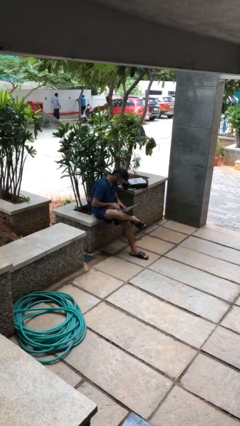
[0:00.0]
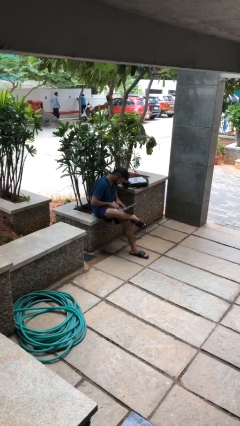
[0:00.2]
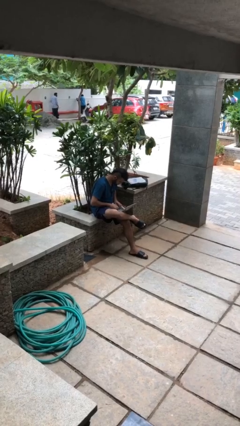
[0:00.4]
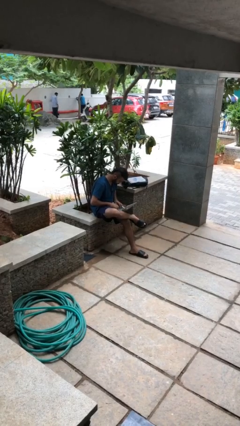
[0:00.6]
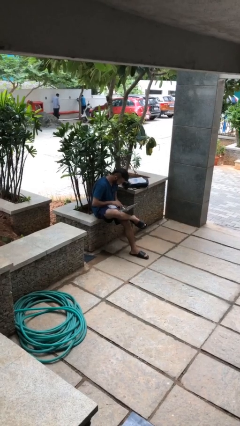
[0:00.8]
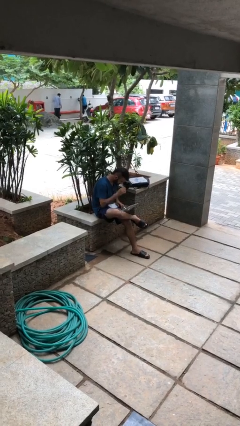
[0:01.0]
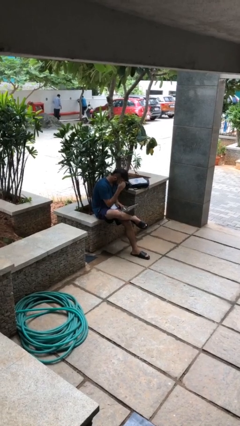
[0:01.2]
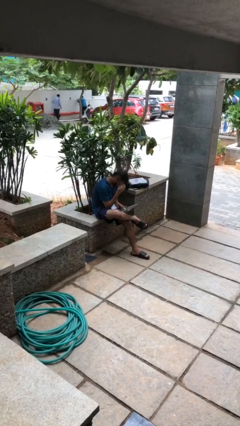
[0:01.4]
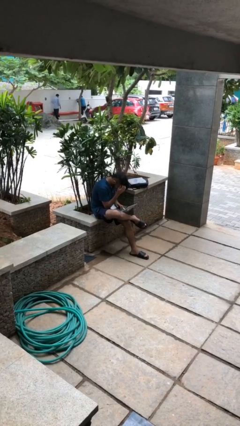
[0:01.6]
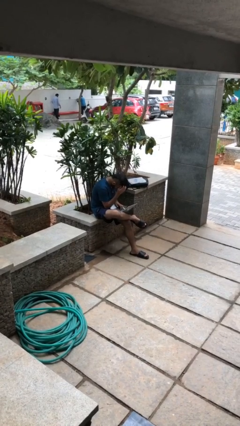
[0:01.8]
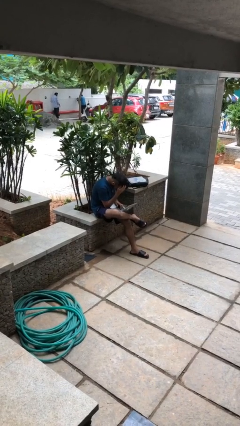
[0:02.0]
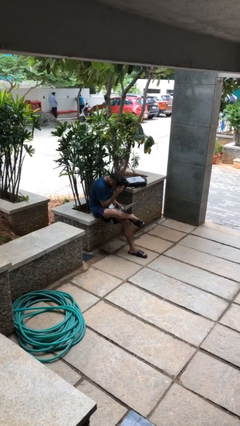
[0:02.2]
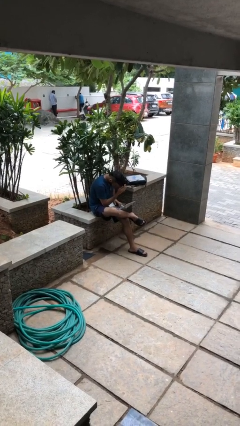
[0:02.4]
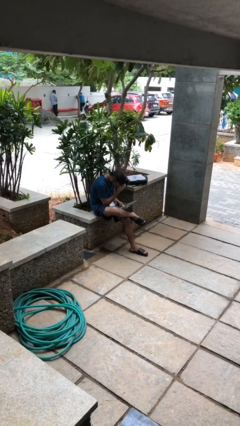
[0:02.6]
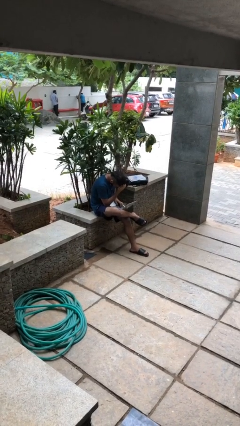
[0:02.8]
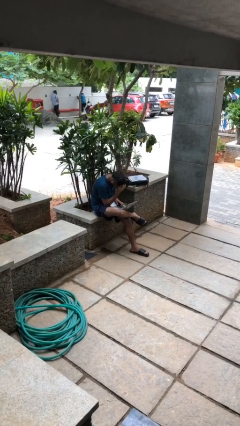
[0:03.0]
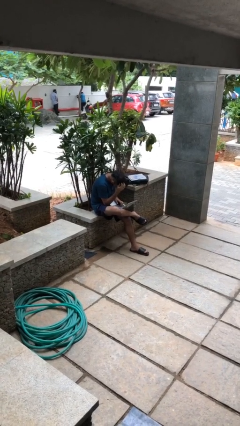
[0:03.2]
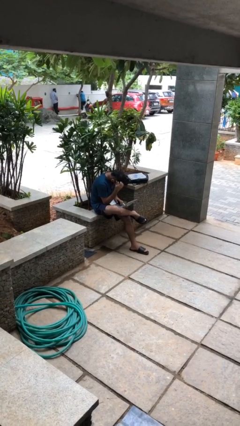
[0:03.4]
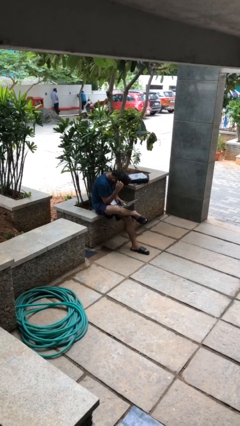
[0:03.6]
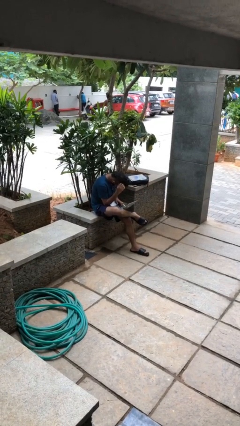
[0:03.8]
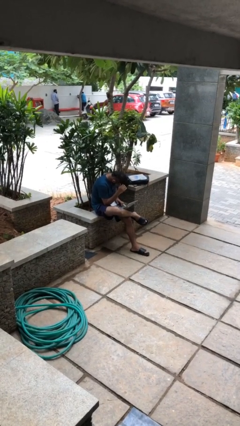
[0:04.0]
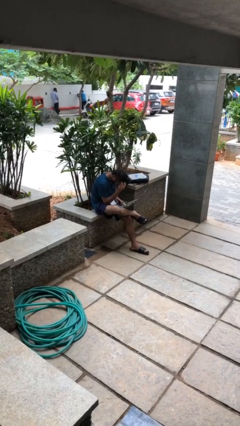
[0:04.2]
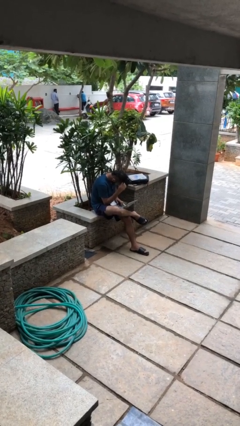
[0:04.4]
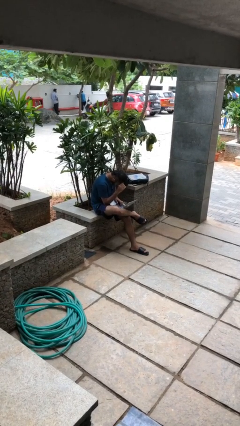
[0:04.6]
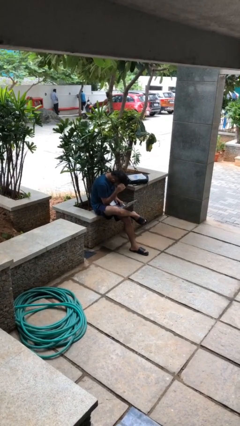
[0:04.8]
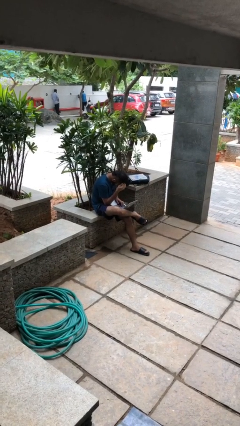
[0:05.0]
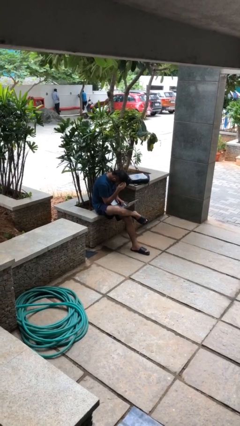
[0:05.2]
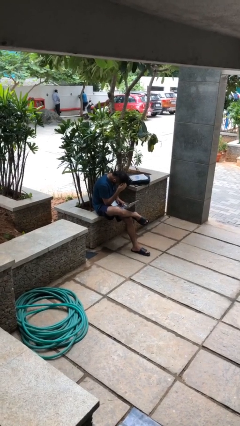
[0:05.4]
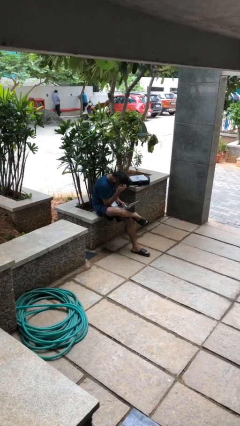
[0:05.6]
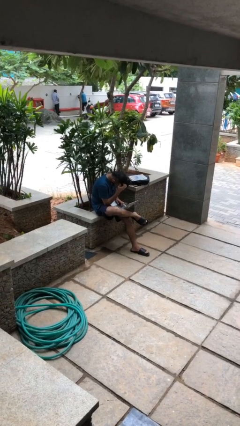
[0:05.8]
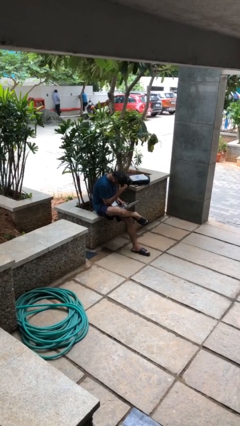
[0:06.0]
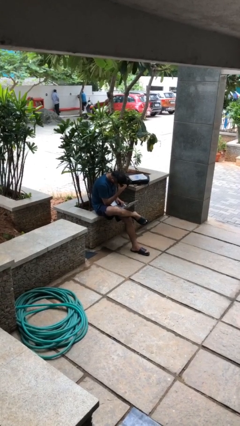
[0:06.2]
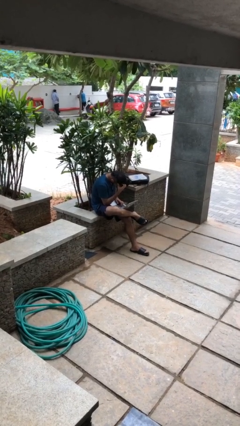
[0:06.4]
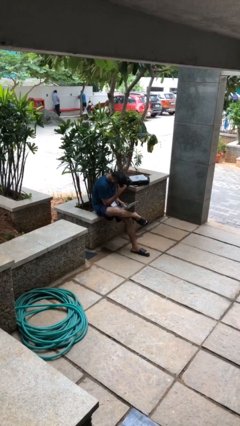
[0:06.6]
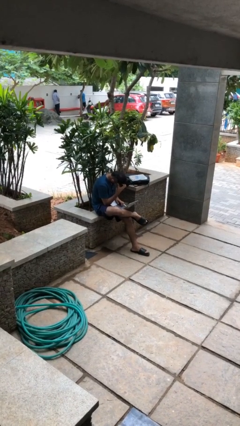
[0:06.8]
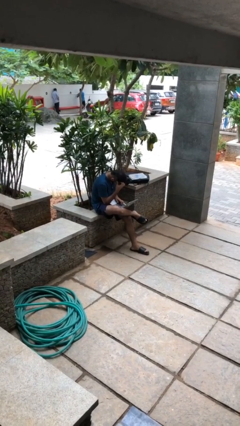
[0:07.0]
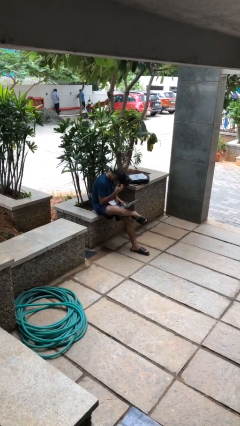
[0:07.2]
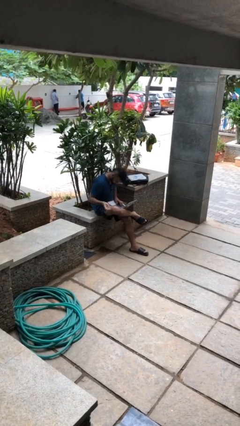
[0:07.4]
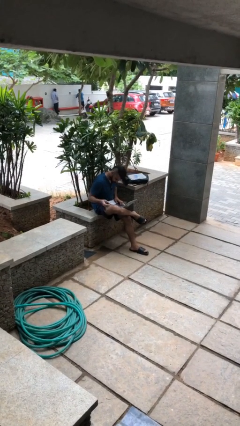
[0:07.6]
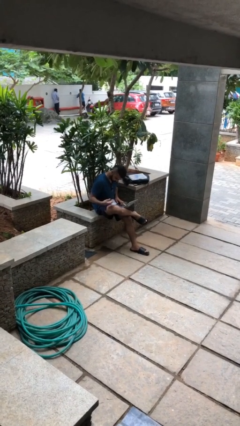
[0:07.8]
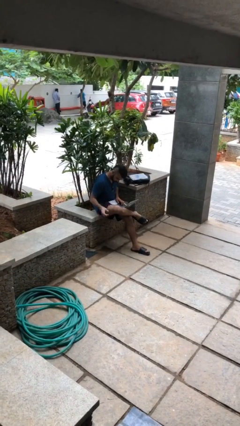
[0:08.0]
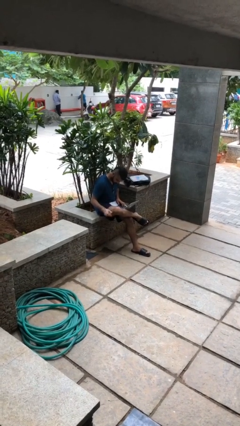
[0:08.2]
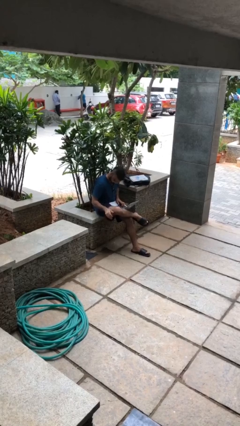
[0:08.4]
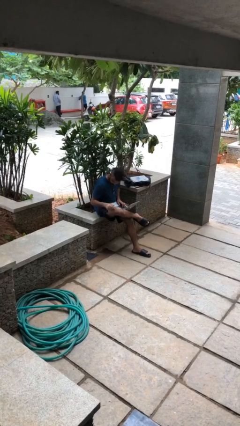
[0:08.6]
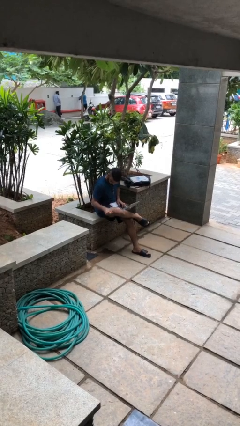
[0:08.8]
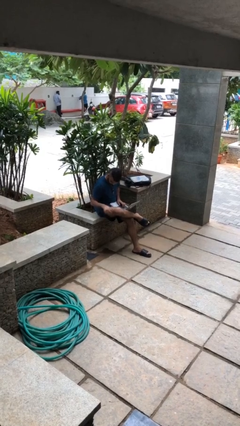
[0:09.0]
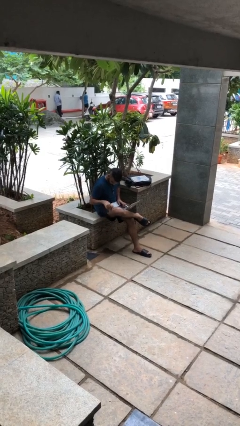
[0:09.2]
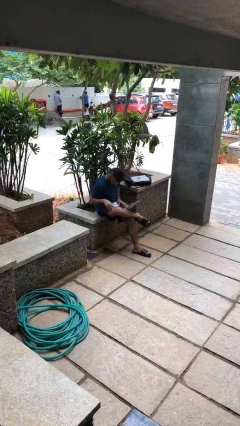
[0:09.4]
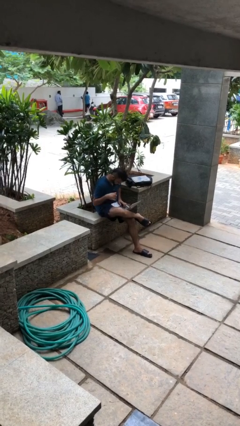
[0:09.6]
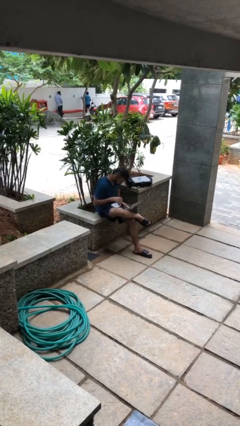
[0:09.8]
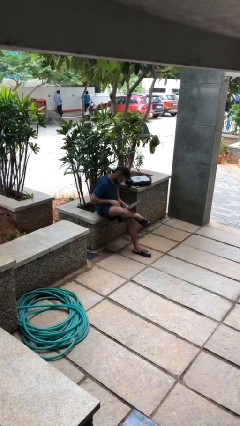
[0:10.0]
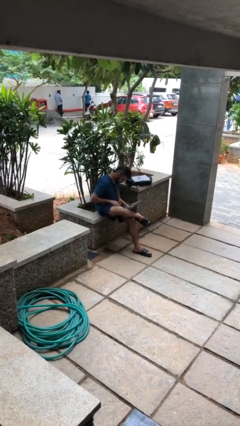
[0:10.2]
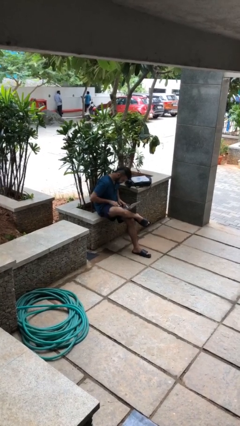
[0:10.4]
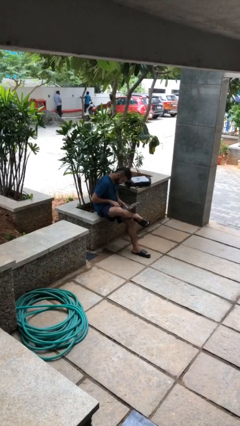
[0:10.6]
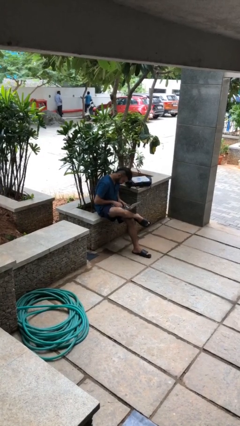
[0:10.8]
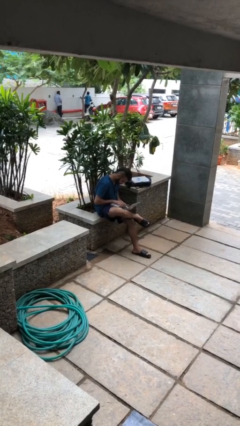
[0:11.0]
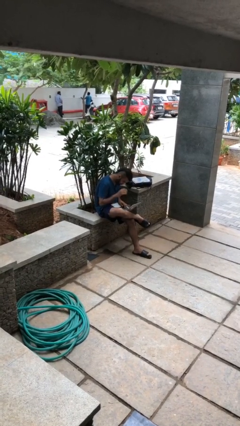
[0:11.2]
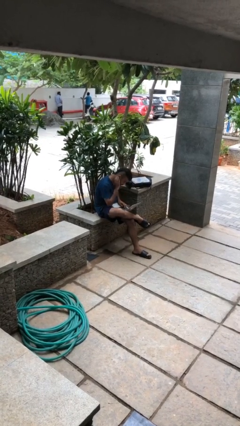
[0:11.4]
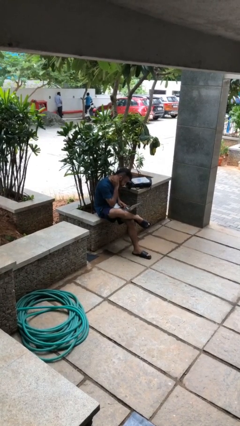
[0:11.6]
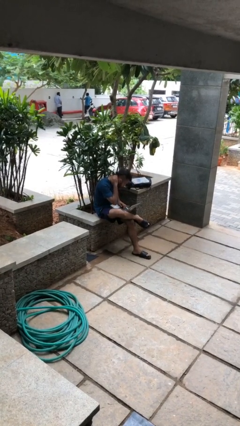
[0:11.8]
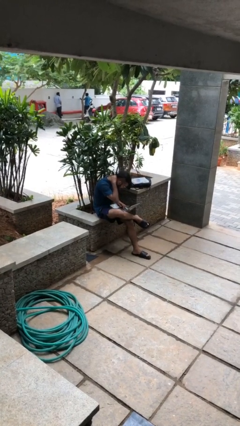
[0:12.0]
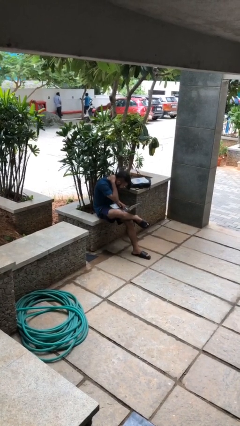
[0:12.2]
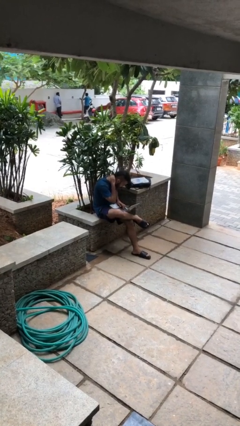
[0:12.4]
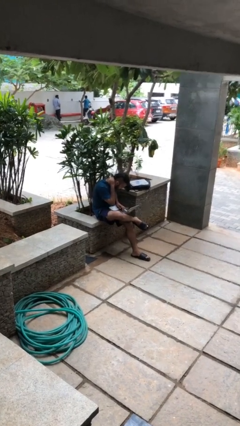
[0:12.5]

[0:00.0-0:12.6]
person interacts with laptop

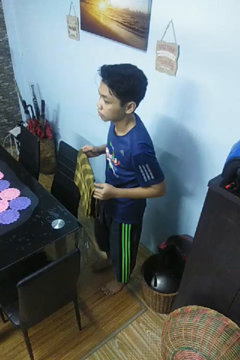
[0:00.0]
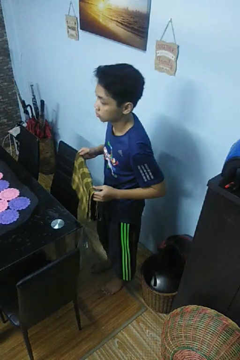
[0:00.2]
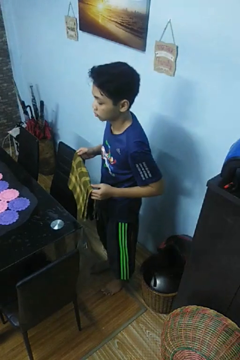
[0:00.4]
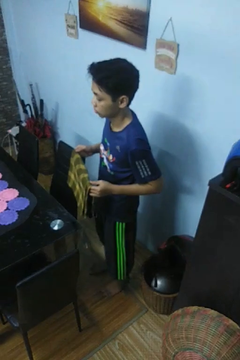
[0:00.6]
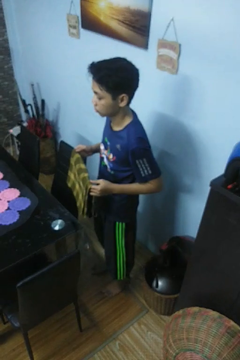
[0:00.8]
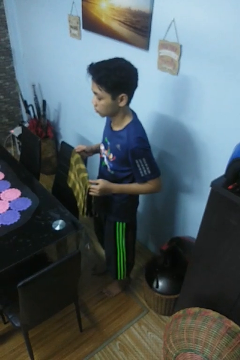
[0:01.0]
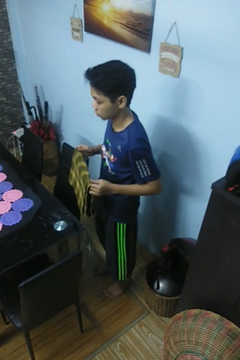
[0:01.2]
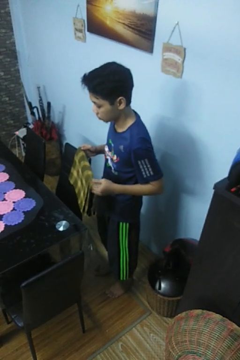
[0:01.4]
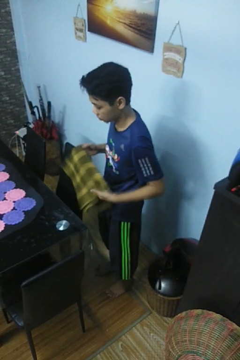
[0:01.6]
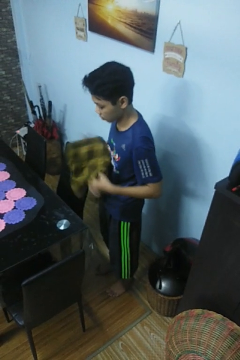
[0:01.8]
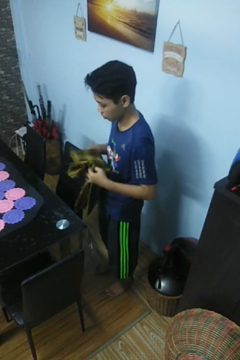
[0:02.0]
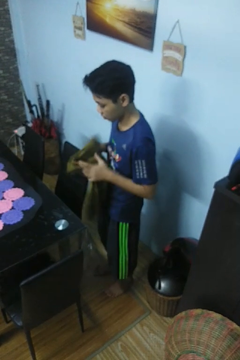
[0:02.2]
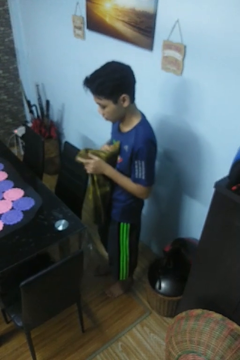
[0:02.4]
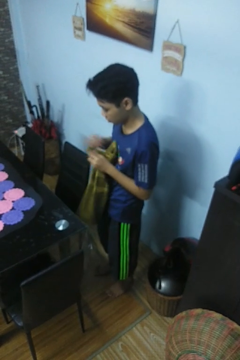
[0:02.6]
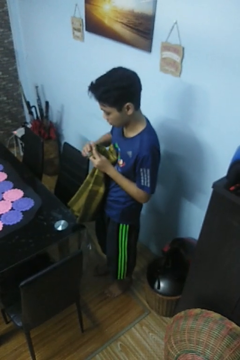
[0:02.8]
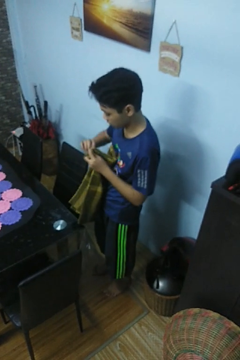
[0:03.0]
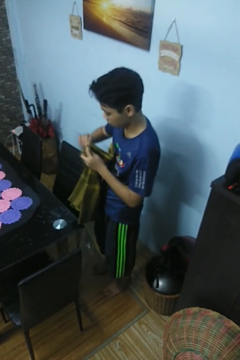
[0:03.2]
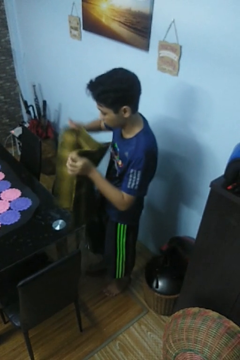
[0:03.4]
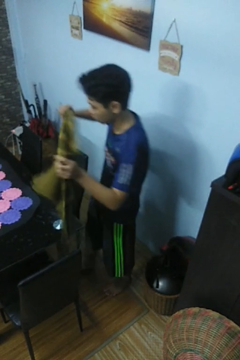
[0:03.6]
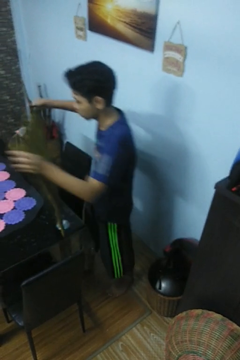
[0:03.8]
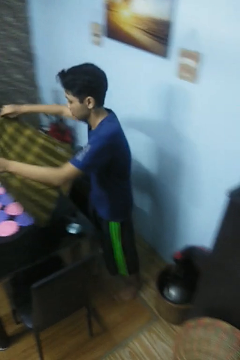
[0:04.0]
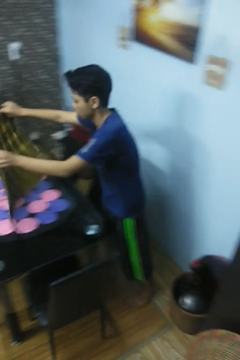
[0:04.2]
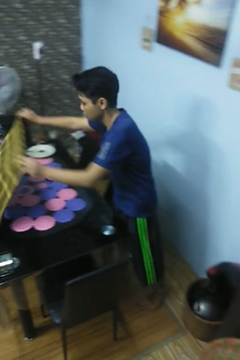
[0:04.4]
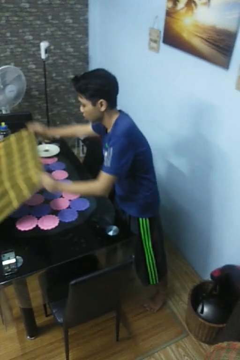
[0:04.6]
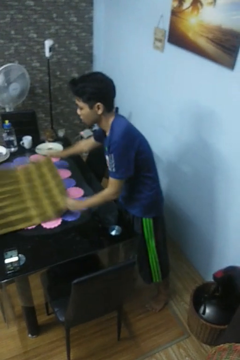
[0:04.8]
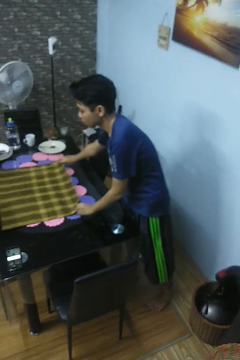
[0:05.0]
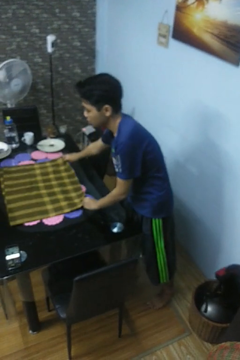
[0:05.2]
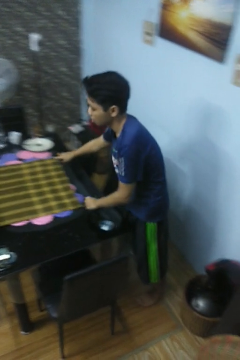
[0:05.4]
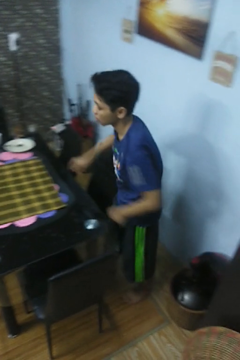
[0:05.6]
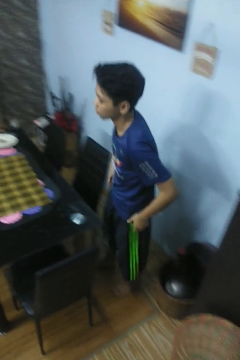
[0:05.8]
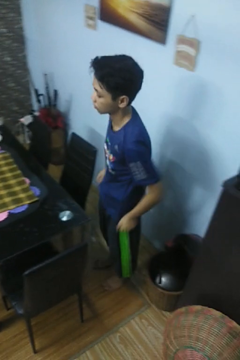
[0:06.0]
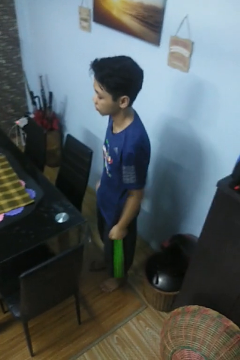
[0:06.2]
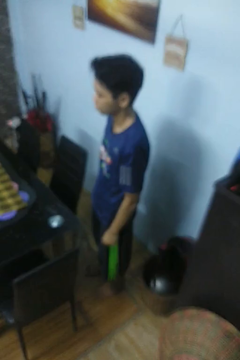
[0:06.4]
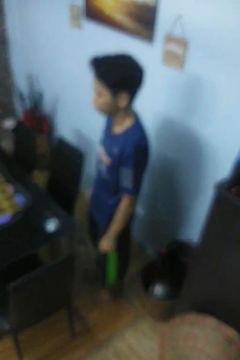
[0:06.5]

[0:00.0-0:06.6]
person spreads tablecloth
